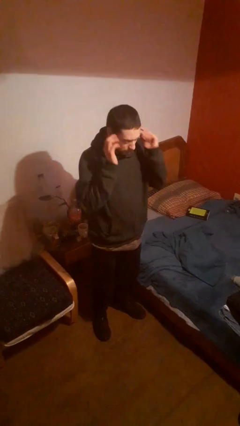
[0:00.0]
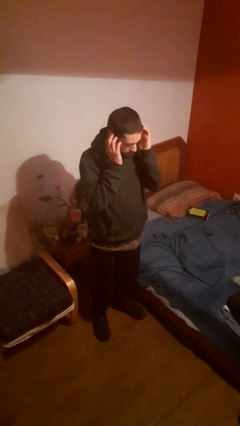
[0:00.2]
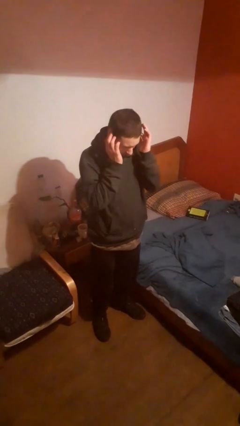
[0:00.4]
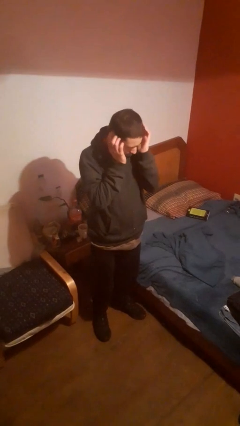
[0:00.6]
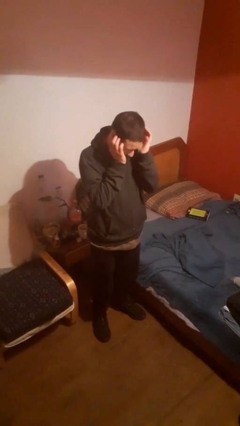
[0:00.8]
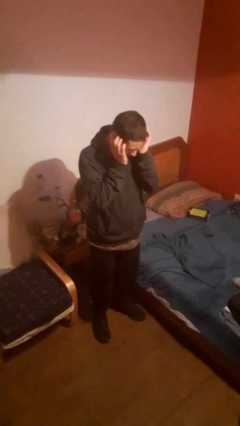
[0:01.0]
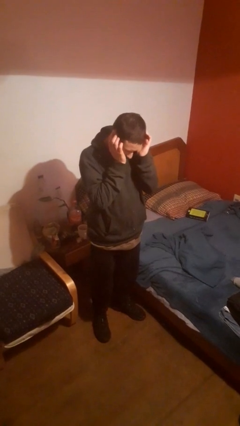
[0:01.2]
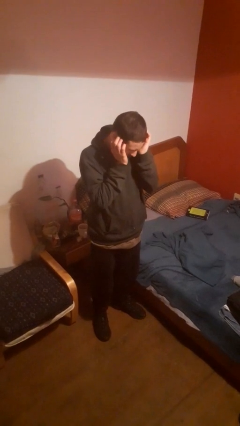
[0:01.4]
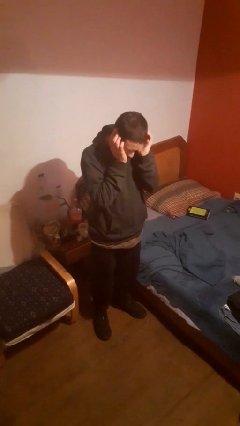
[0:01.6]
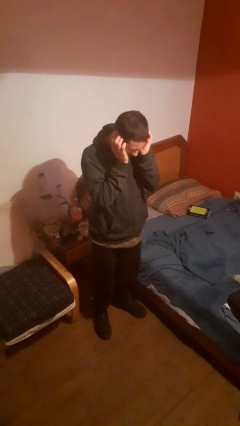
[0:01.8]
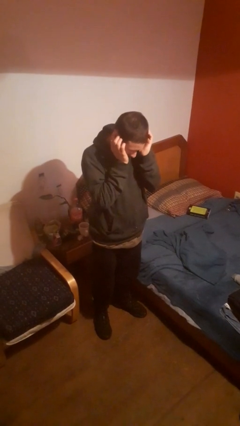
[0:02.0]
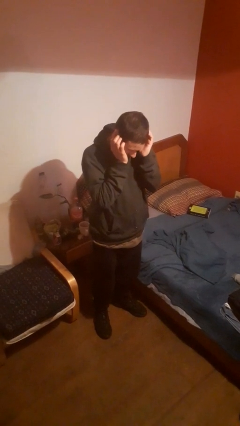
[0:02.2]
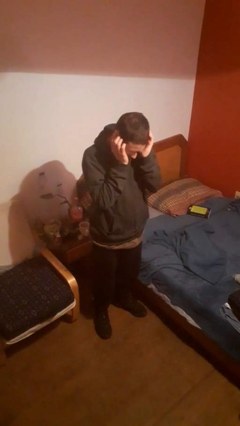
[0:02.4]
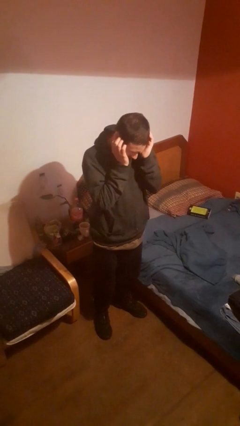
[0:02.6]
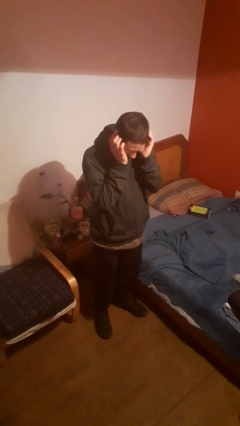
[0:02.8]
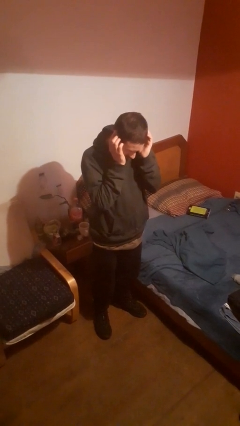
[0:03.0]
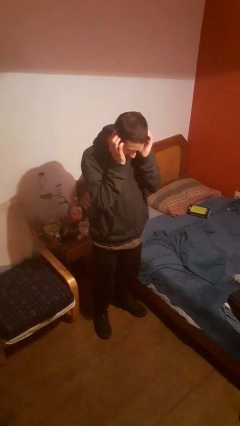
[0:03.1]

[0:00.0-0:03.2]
person puts fingers in ear

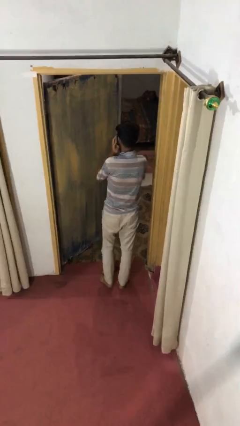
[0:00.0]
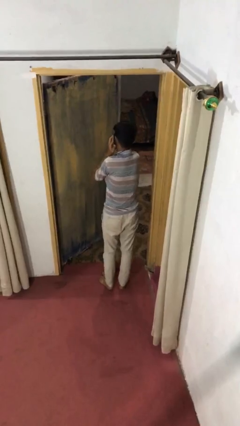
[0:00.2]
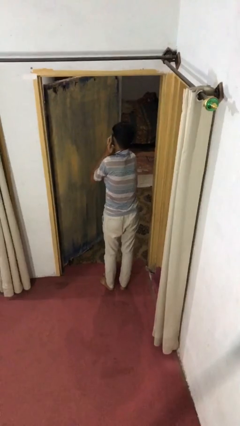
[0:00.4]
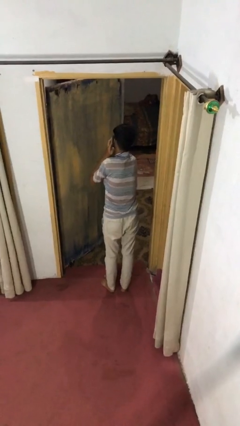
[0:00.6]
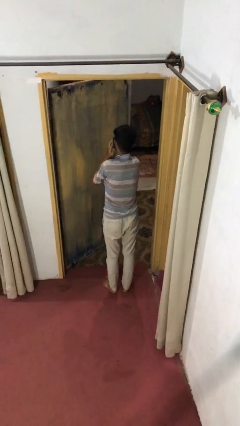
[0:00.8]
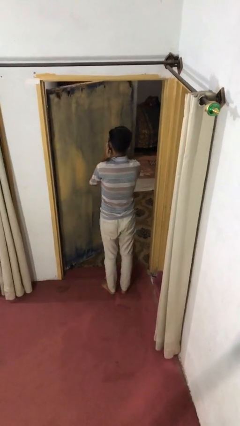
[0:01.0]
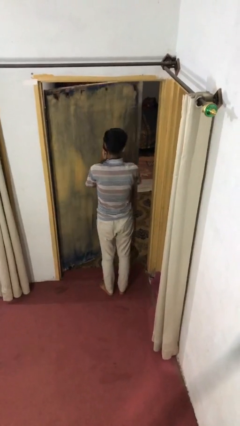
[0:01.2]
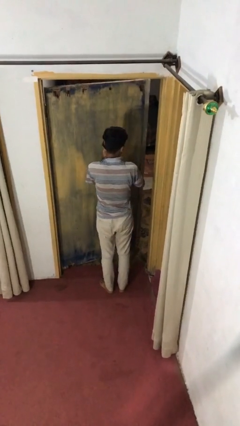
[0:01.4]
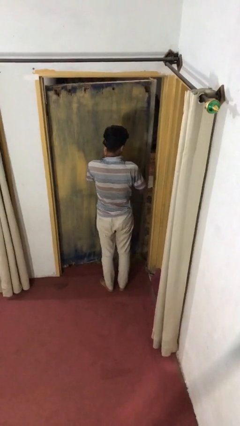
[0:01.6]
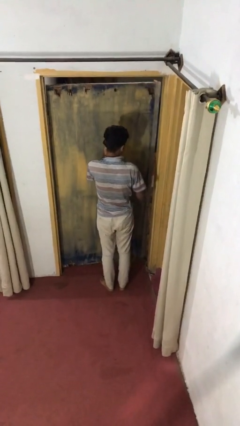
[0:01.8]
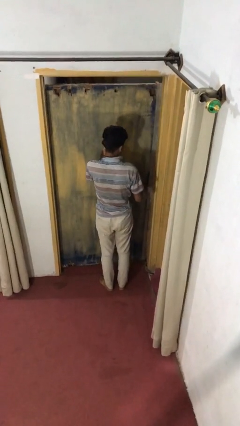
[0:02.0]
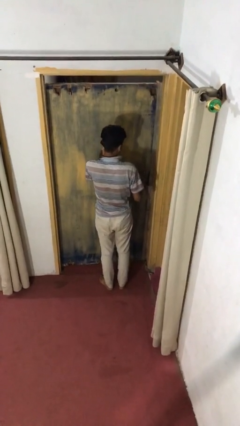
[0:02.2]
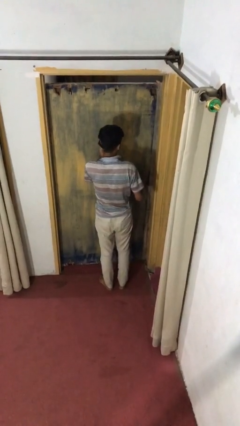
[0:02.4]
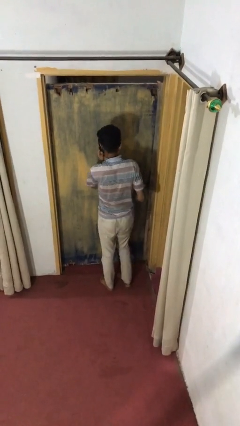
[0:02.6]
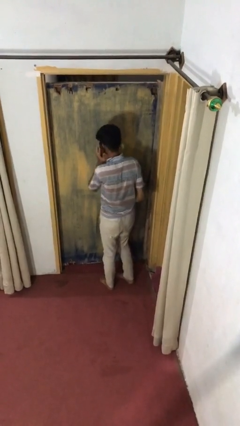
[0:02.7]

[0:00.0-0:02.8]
person closes facility door

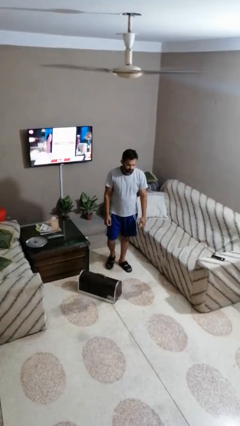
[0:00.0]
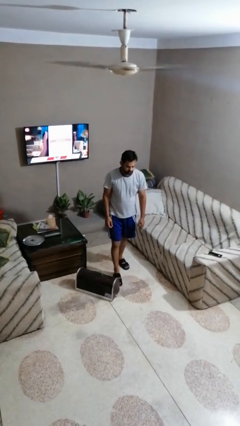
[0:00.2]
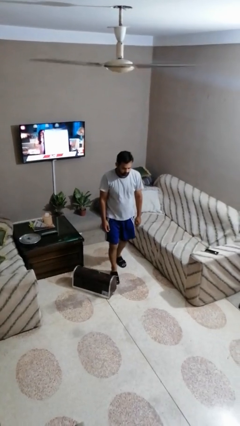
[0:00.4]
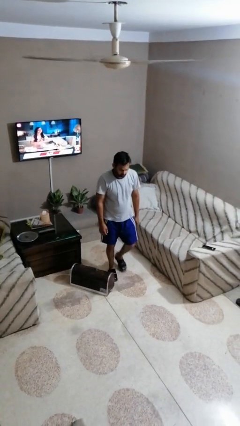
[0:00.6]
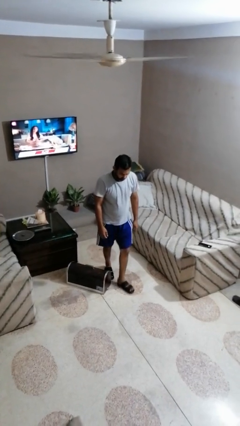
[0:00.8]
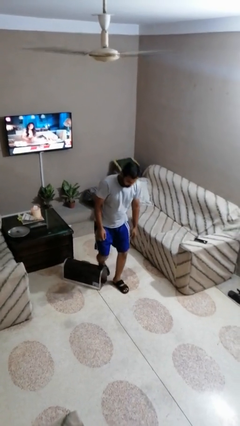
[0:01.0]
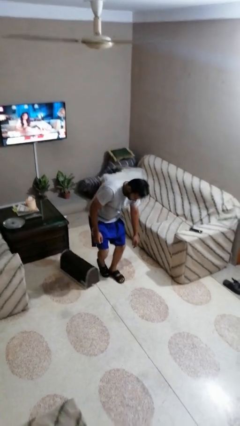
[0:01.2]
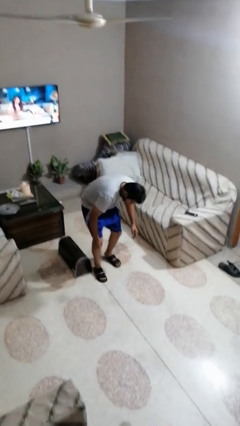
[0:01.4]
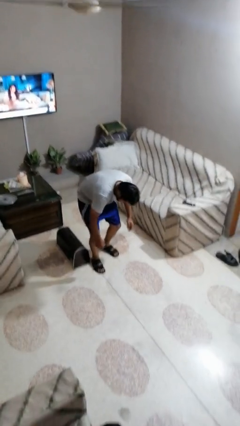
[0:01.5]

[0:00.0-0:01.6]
person trips on object on floor

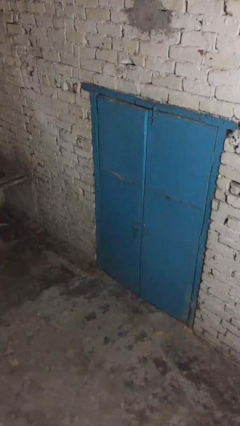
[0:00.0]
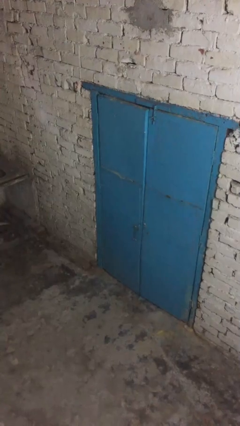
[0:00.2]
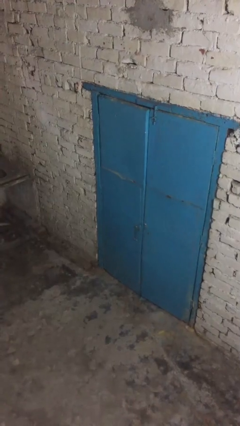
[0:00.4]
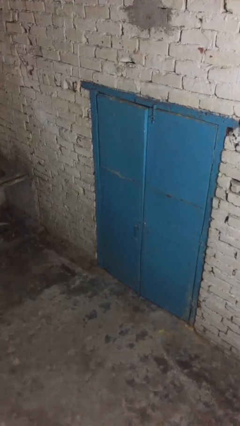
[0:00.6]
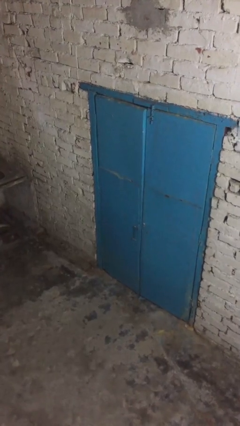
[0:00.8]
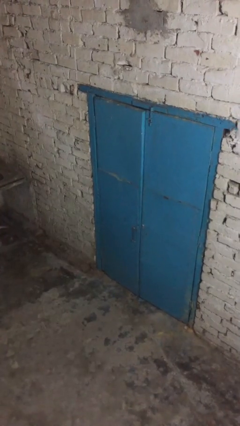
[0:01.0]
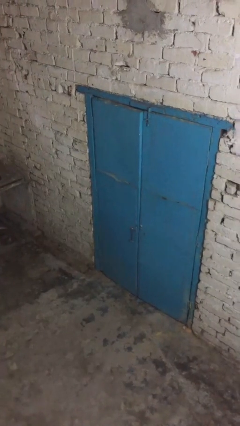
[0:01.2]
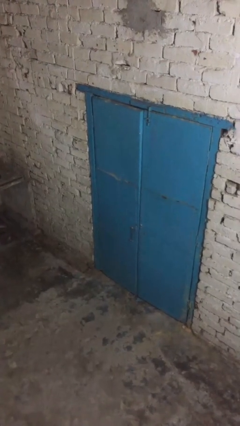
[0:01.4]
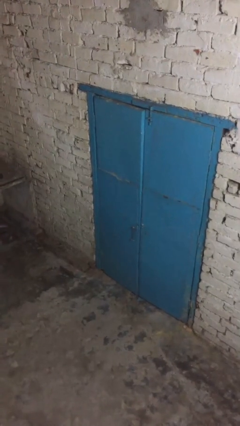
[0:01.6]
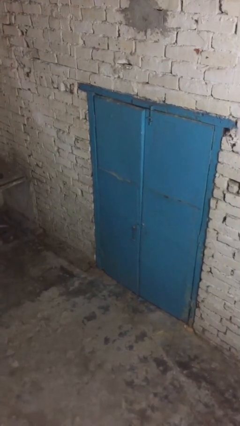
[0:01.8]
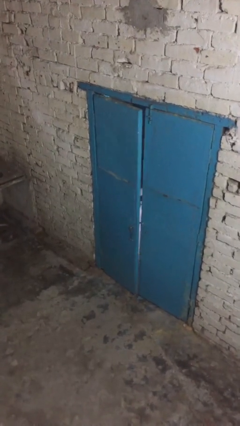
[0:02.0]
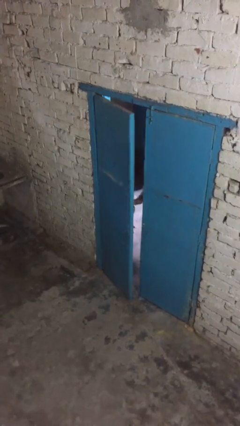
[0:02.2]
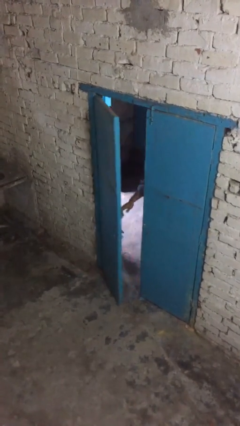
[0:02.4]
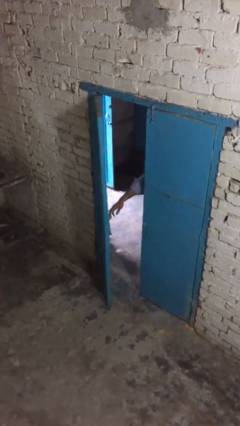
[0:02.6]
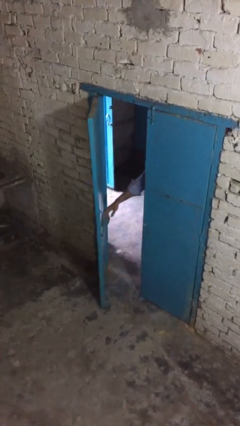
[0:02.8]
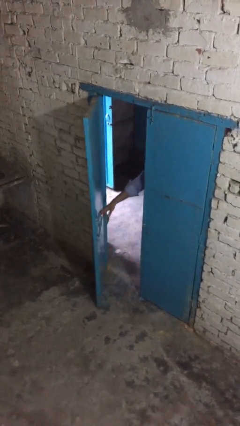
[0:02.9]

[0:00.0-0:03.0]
person opens facility door

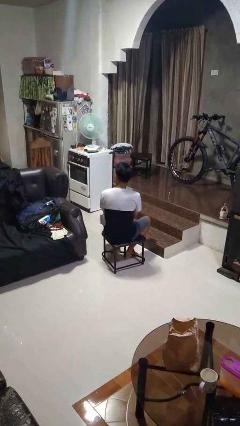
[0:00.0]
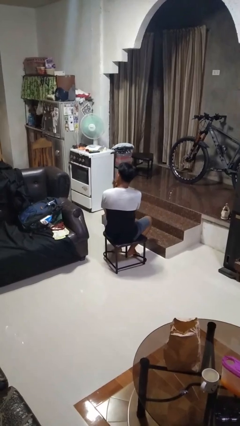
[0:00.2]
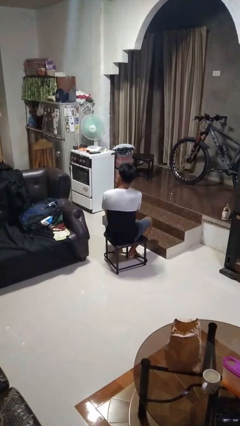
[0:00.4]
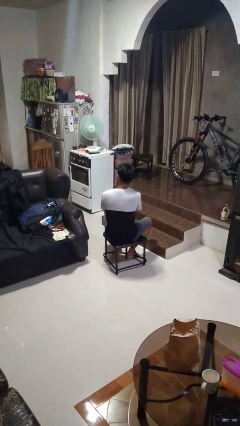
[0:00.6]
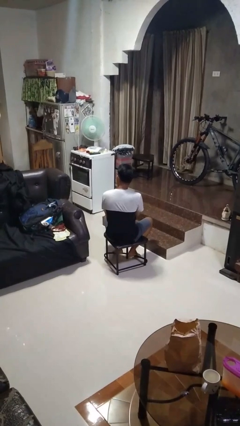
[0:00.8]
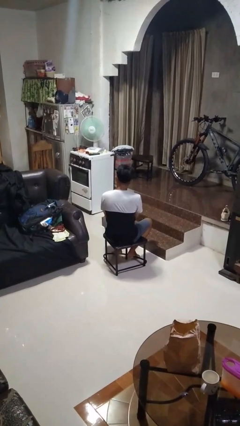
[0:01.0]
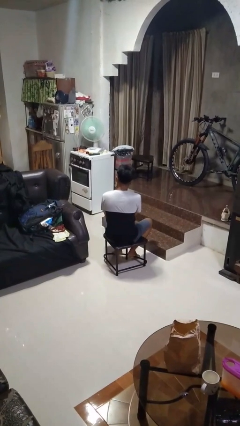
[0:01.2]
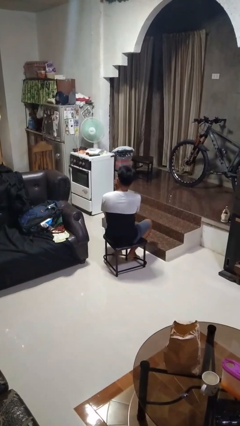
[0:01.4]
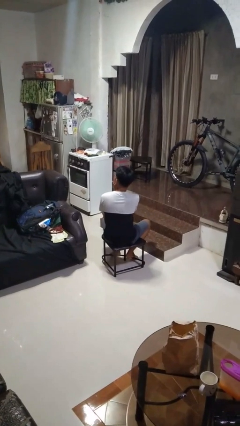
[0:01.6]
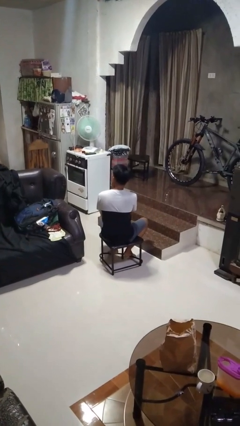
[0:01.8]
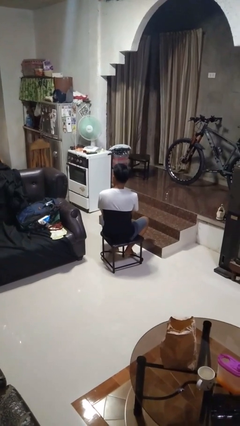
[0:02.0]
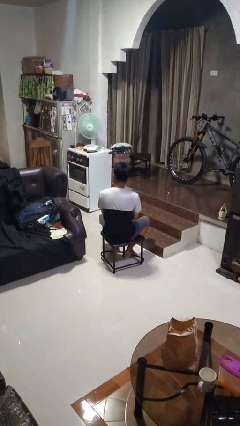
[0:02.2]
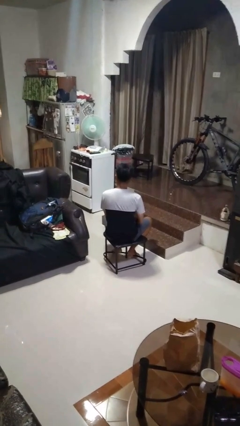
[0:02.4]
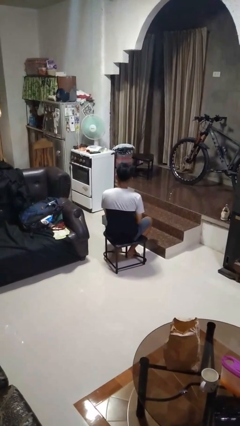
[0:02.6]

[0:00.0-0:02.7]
person strokes chin

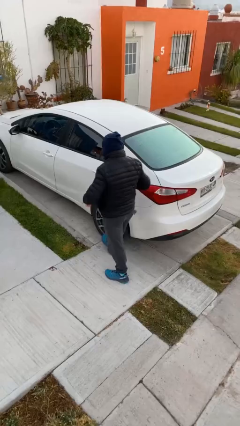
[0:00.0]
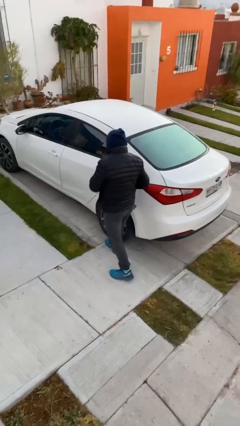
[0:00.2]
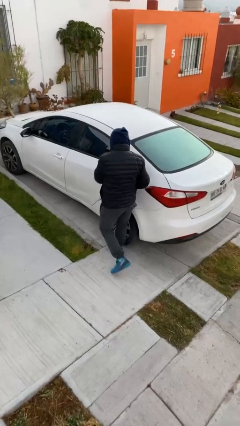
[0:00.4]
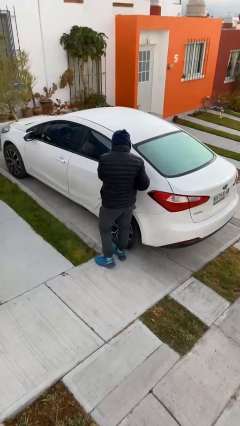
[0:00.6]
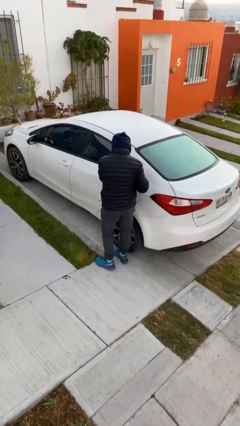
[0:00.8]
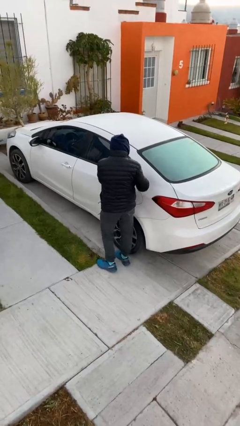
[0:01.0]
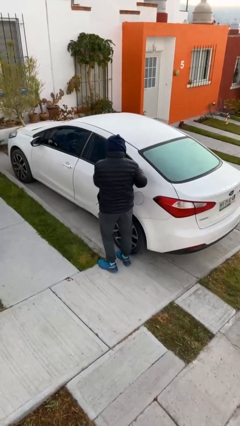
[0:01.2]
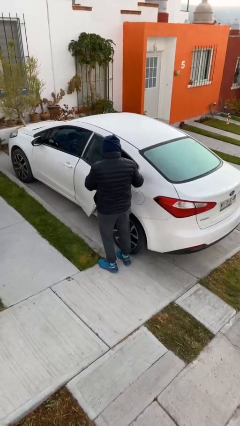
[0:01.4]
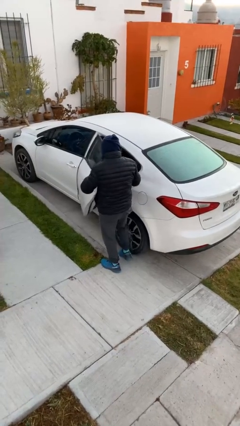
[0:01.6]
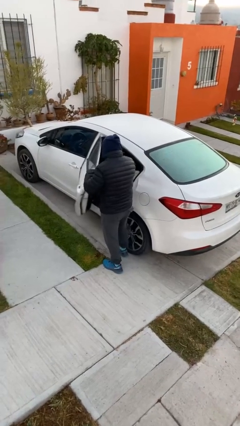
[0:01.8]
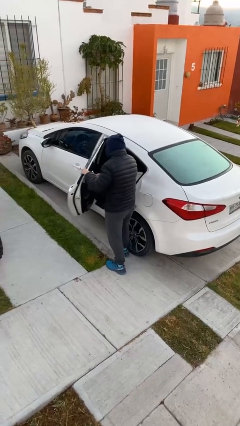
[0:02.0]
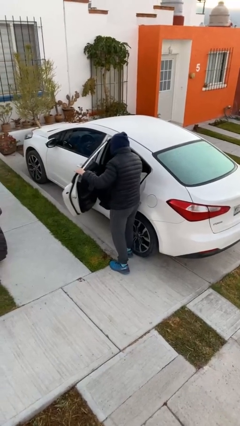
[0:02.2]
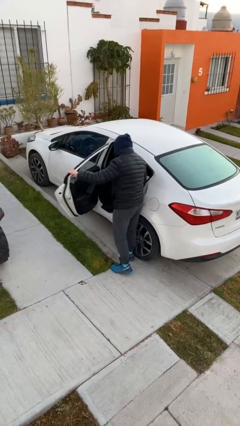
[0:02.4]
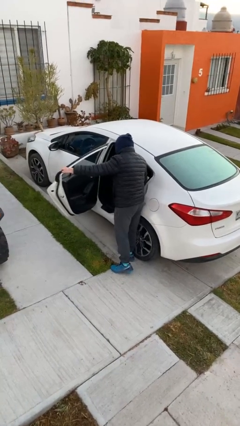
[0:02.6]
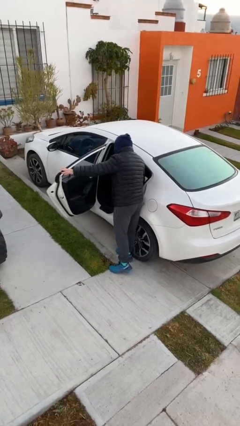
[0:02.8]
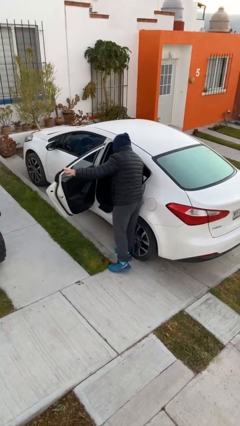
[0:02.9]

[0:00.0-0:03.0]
person opens car door

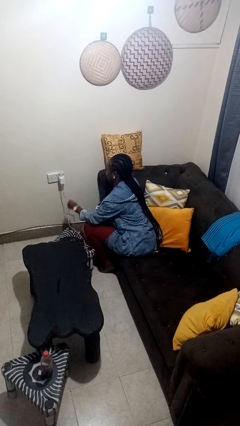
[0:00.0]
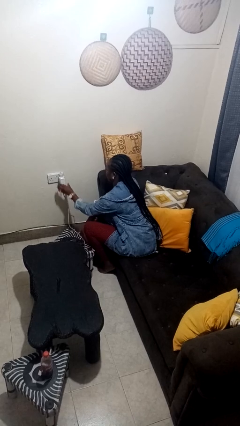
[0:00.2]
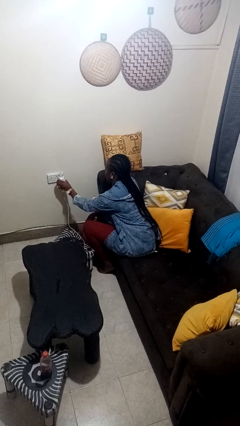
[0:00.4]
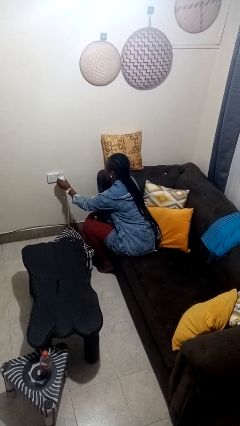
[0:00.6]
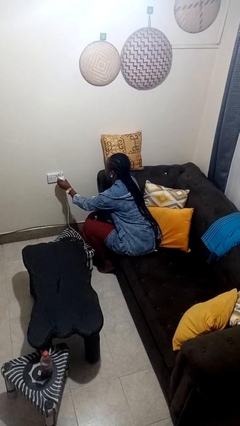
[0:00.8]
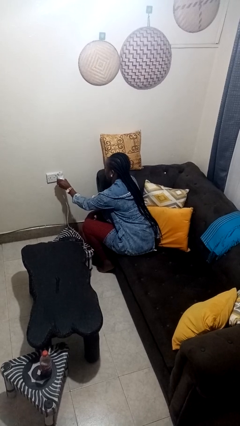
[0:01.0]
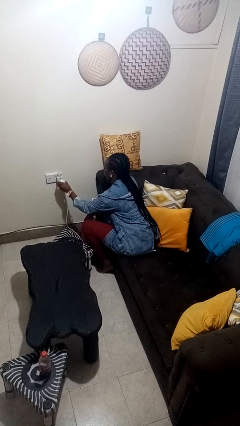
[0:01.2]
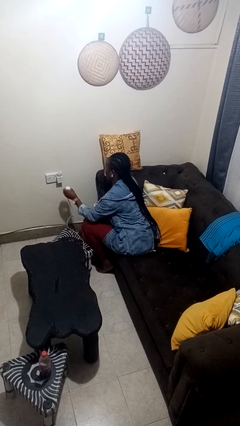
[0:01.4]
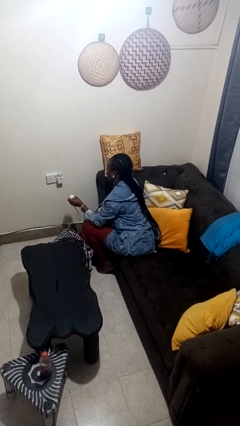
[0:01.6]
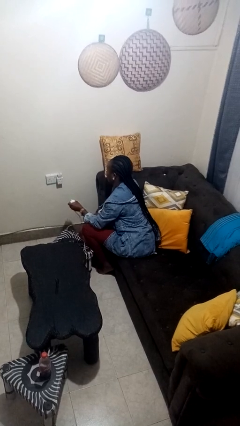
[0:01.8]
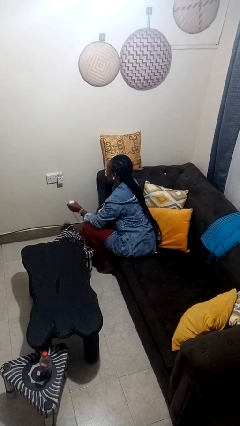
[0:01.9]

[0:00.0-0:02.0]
person unplugs from electrical socket
